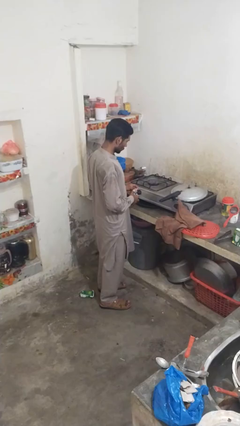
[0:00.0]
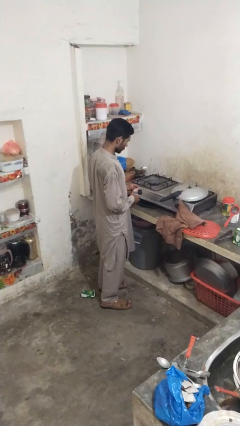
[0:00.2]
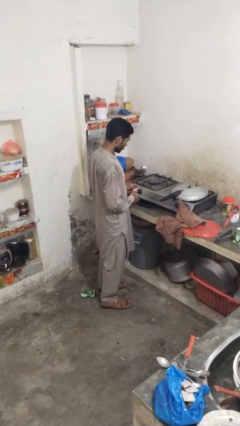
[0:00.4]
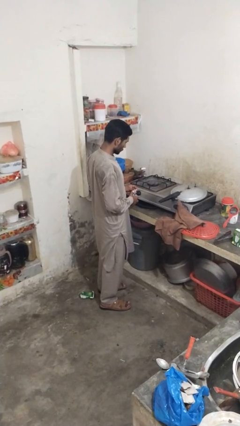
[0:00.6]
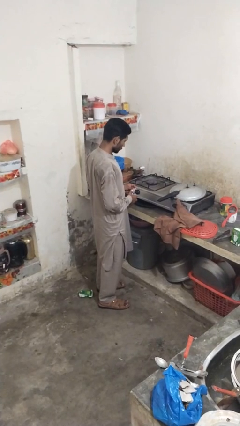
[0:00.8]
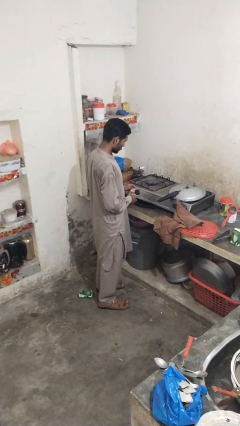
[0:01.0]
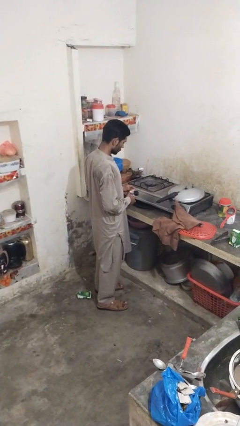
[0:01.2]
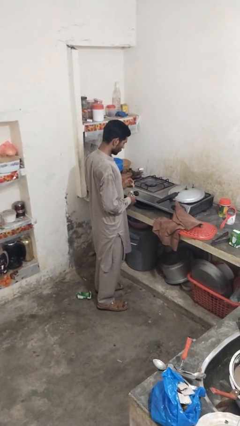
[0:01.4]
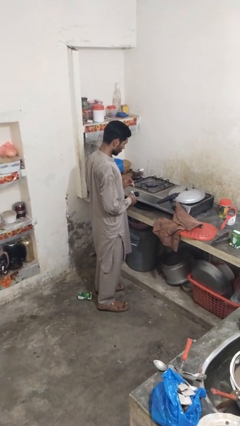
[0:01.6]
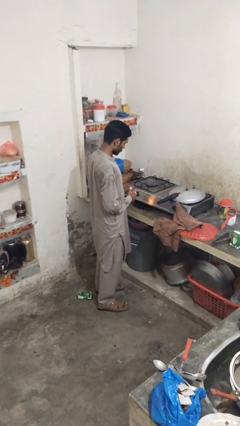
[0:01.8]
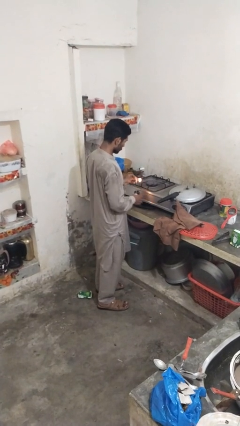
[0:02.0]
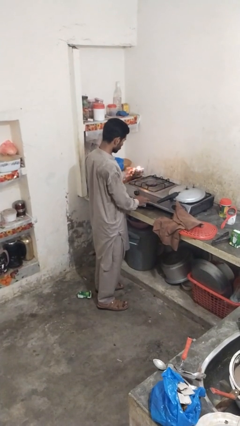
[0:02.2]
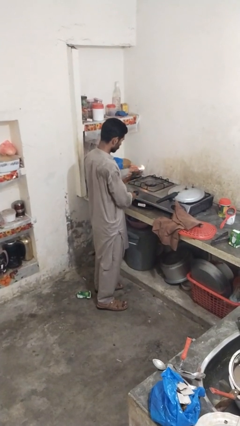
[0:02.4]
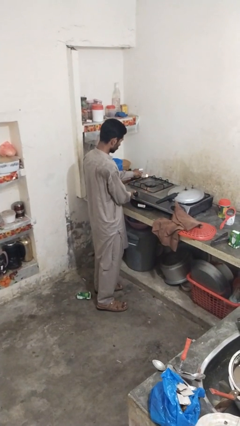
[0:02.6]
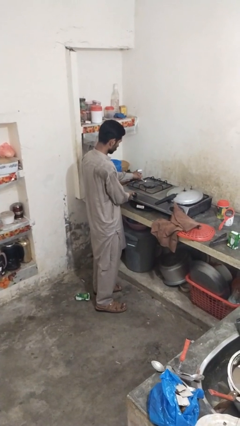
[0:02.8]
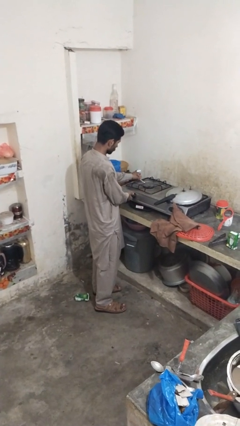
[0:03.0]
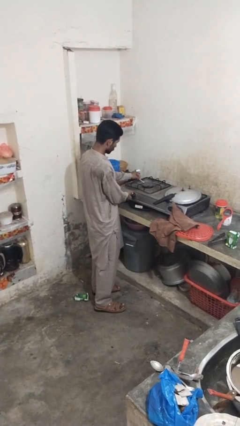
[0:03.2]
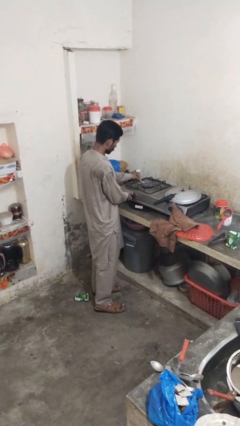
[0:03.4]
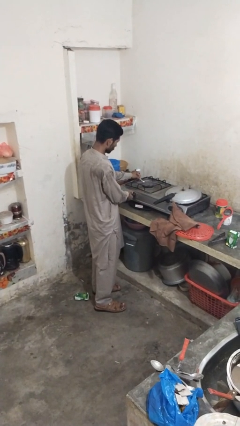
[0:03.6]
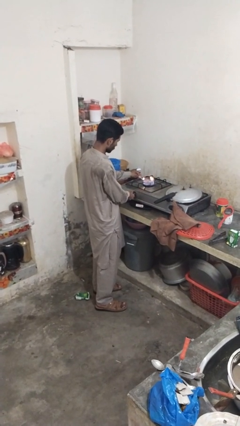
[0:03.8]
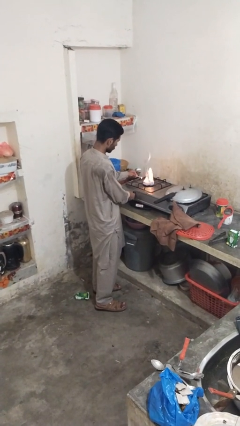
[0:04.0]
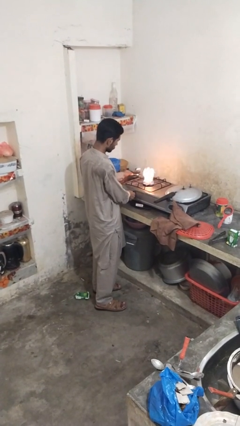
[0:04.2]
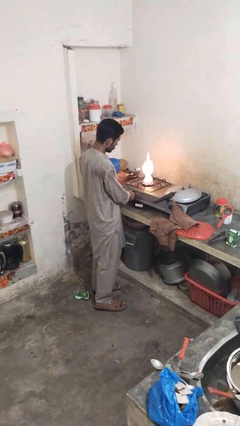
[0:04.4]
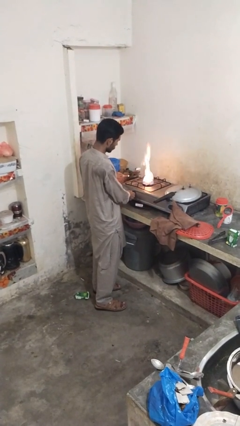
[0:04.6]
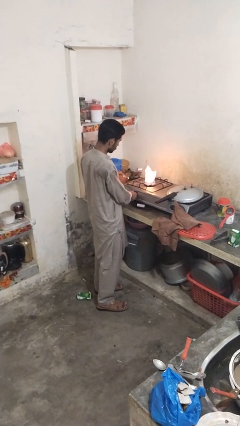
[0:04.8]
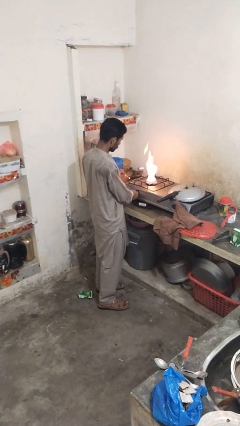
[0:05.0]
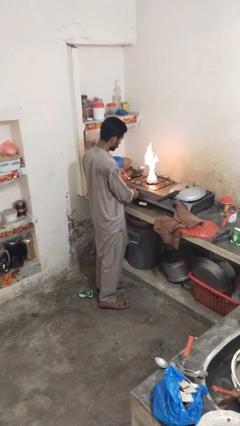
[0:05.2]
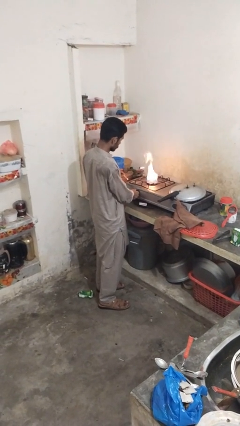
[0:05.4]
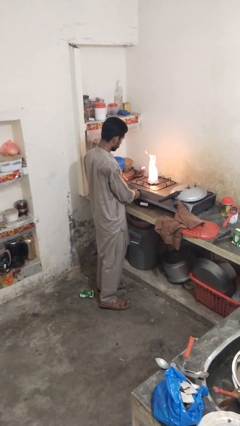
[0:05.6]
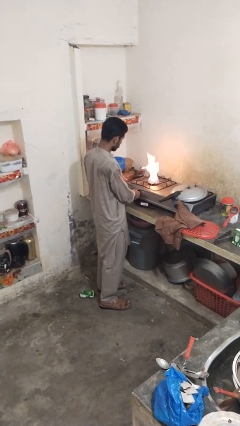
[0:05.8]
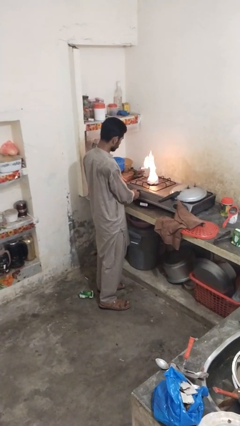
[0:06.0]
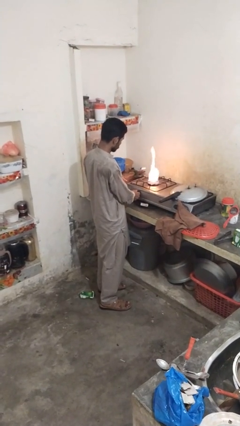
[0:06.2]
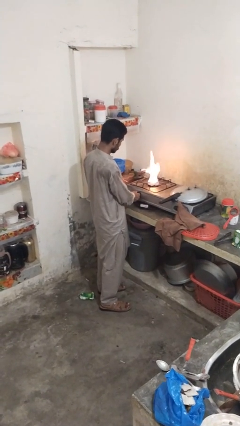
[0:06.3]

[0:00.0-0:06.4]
person turns on stovetop

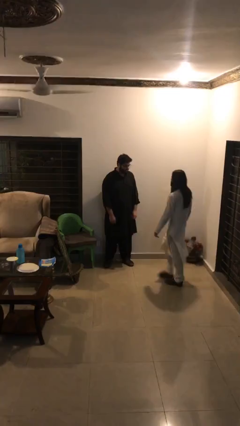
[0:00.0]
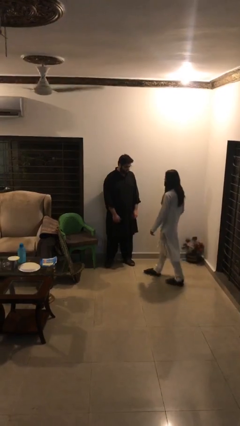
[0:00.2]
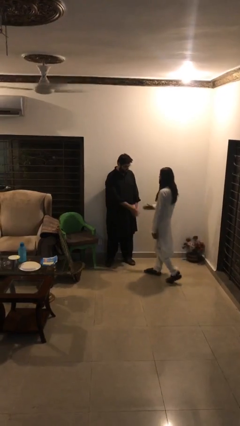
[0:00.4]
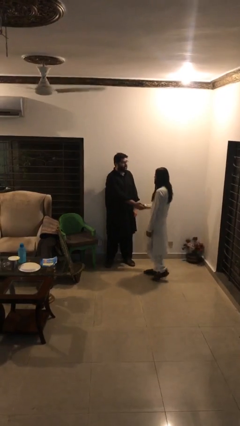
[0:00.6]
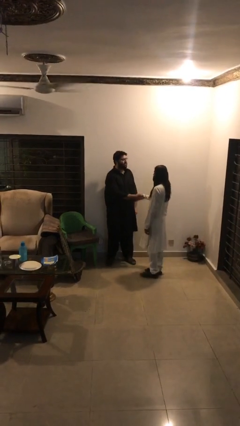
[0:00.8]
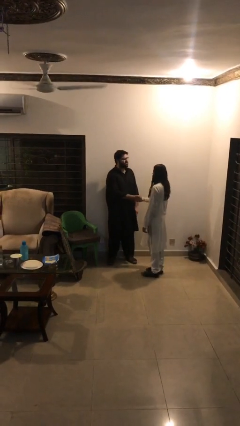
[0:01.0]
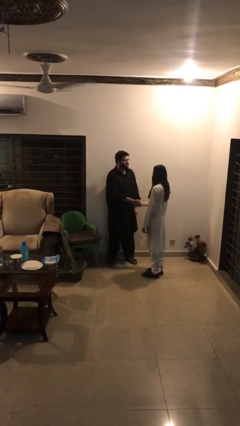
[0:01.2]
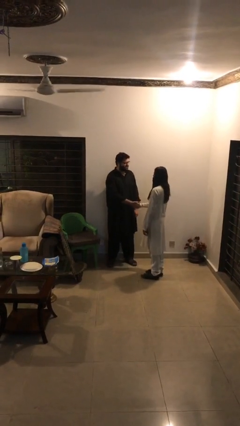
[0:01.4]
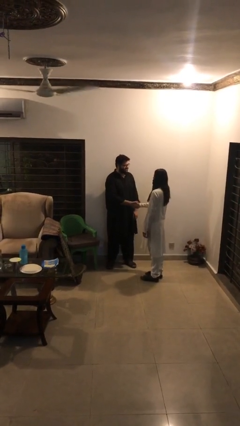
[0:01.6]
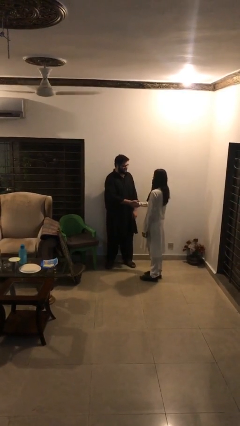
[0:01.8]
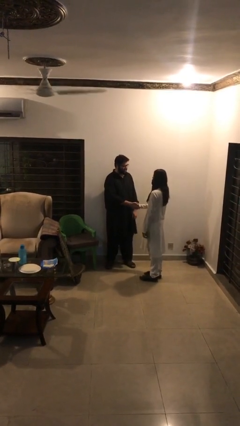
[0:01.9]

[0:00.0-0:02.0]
person shakes hand

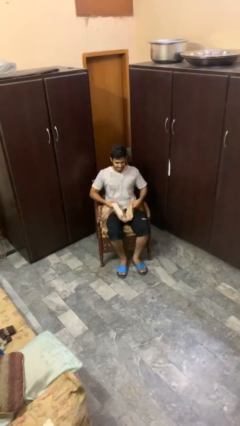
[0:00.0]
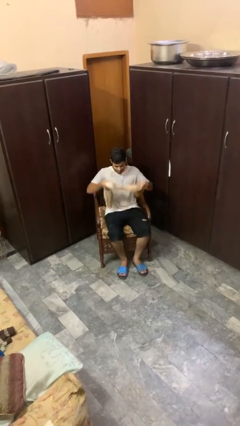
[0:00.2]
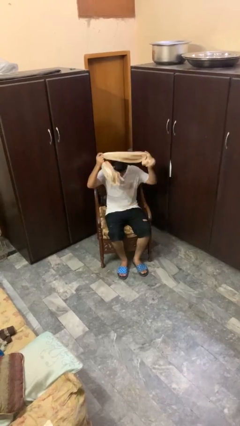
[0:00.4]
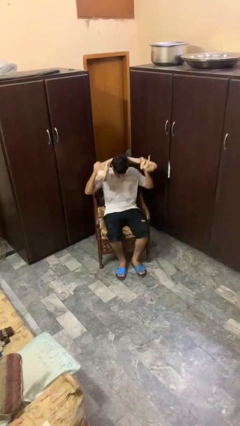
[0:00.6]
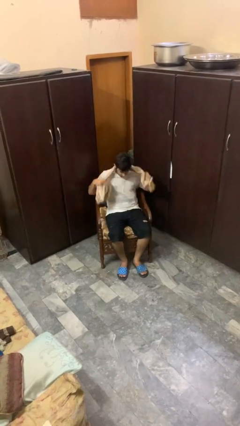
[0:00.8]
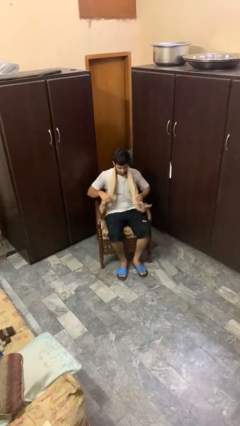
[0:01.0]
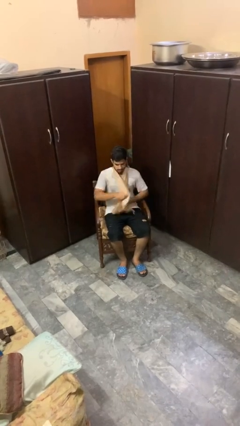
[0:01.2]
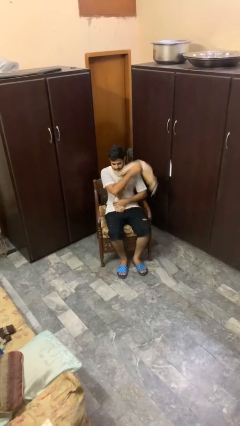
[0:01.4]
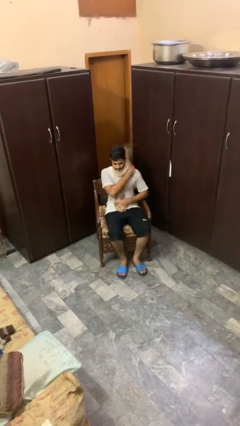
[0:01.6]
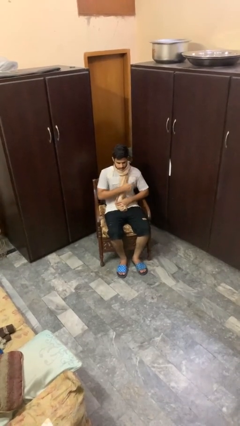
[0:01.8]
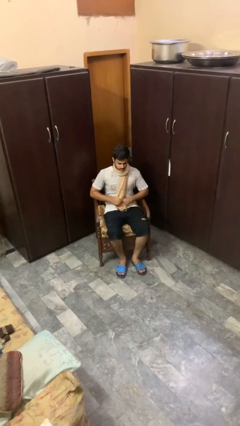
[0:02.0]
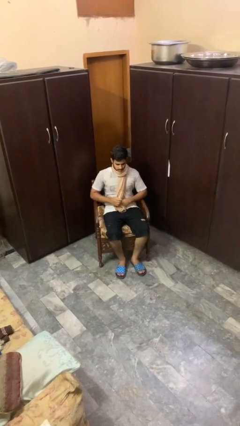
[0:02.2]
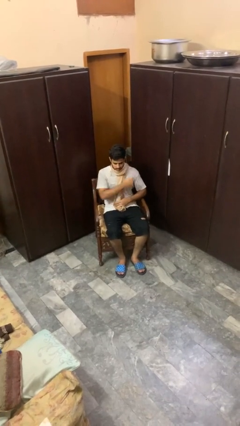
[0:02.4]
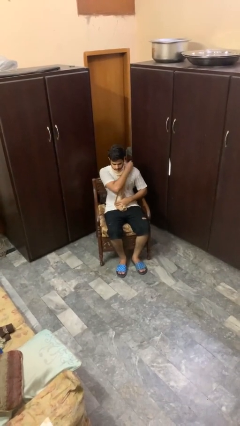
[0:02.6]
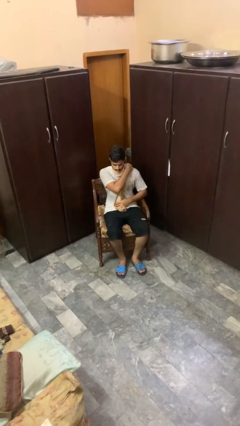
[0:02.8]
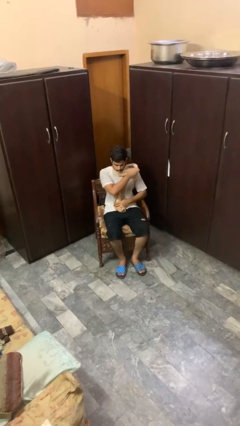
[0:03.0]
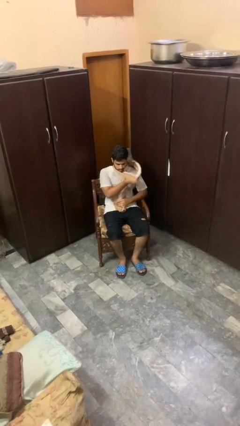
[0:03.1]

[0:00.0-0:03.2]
person puts on scarf

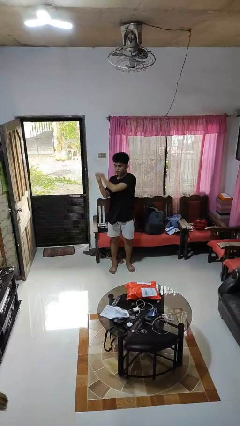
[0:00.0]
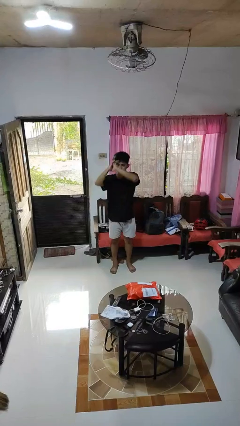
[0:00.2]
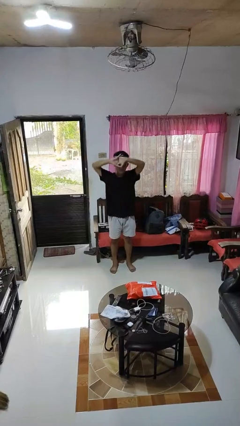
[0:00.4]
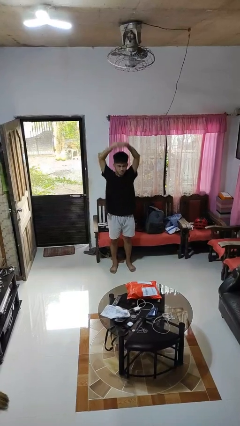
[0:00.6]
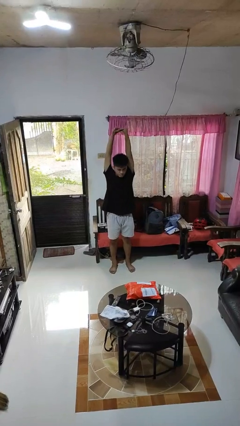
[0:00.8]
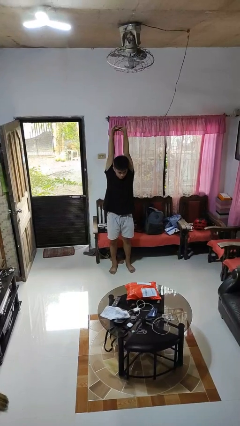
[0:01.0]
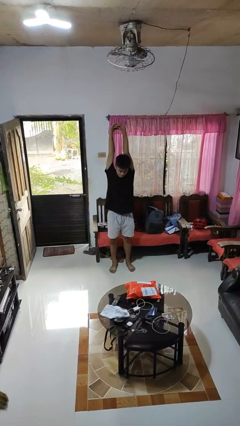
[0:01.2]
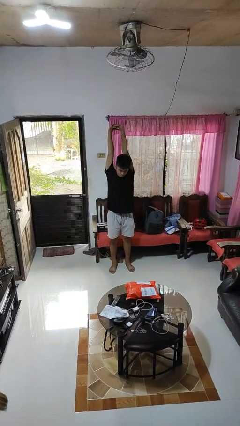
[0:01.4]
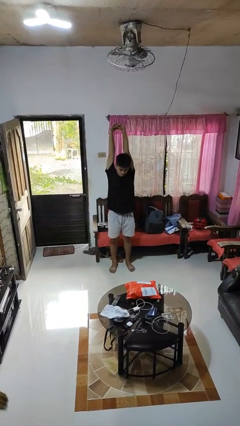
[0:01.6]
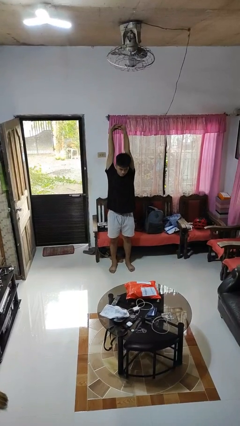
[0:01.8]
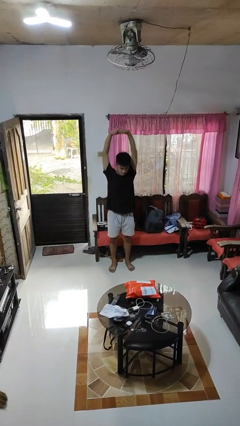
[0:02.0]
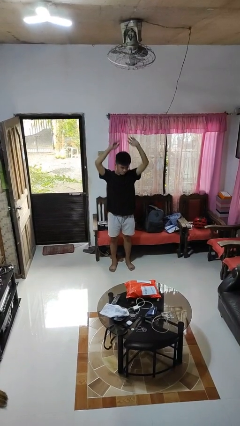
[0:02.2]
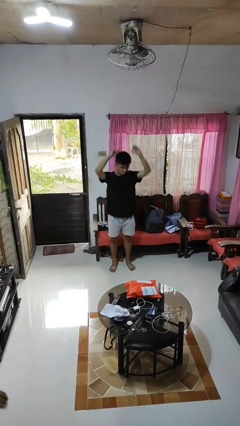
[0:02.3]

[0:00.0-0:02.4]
person stretches arms over head

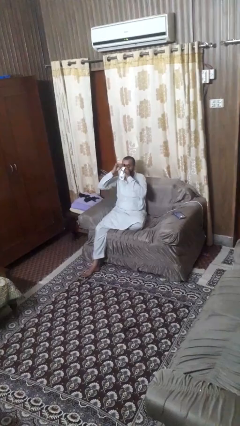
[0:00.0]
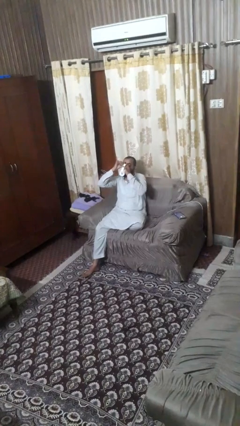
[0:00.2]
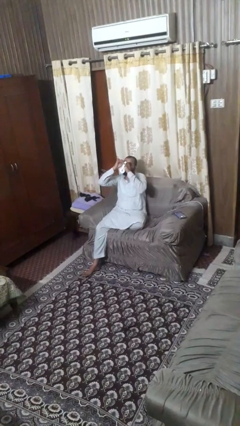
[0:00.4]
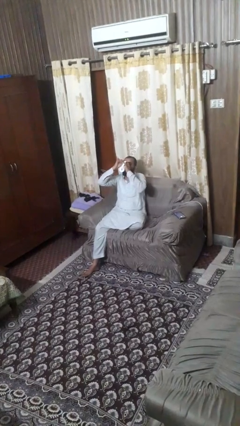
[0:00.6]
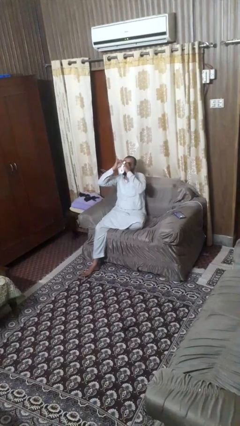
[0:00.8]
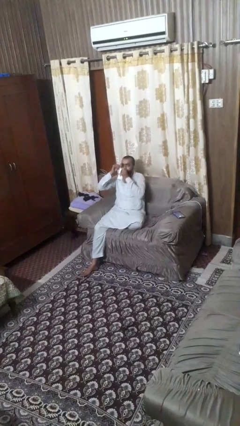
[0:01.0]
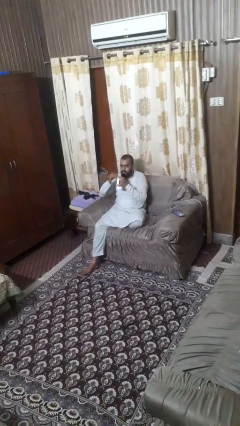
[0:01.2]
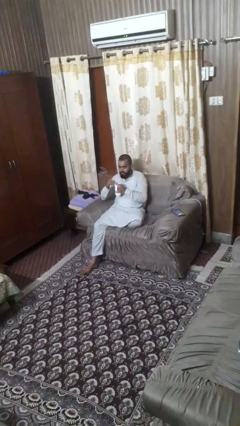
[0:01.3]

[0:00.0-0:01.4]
person drinks from mug

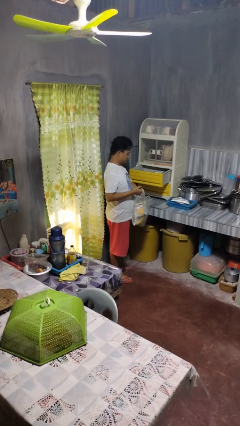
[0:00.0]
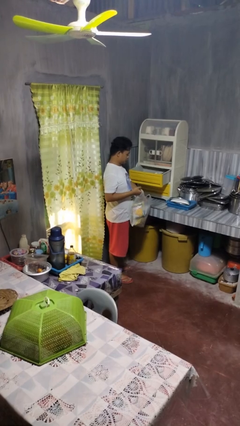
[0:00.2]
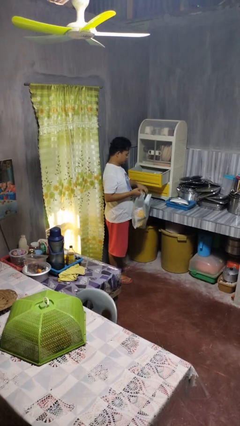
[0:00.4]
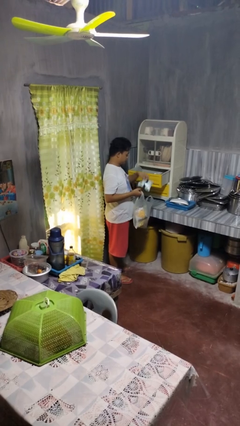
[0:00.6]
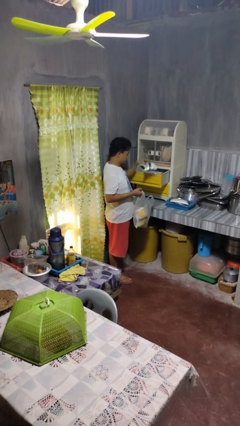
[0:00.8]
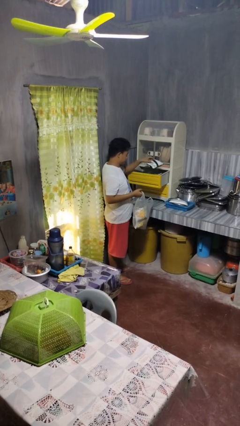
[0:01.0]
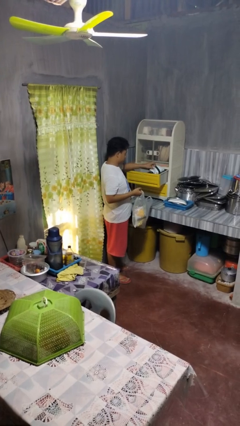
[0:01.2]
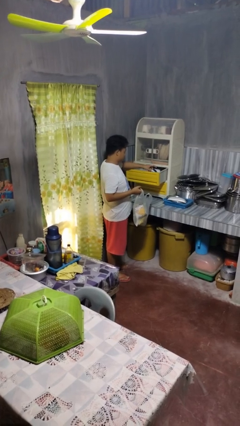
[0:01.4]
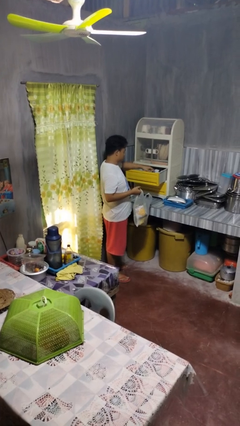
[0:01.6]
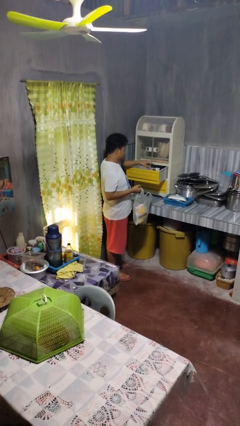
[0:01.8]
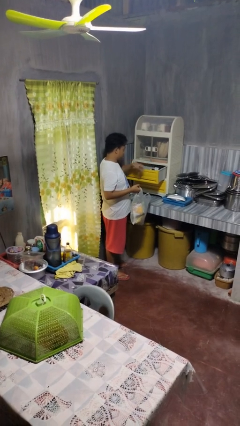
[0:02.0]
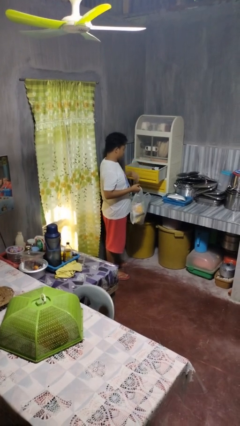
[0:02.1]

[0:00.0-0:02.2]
person loads groceries into cabinet

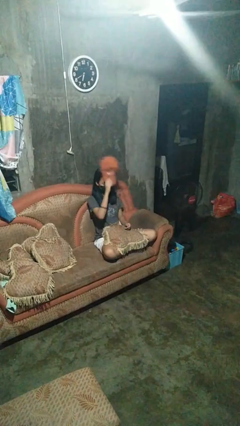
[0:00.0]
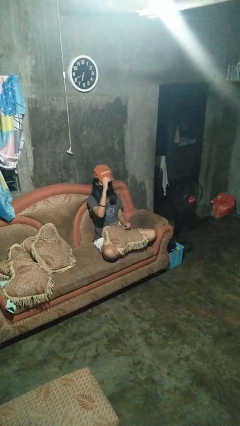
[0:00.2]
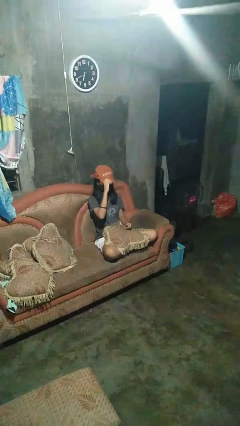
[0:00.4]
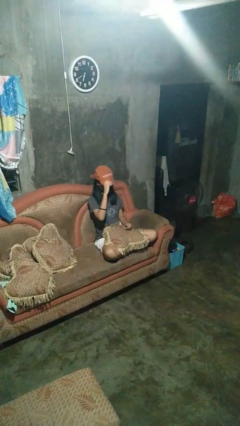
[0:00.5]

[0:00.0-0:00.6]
person puts on hat
